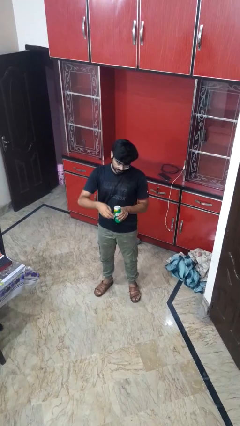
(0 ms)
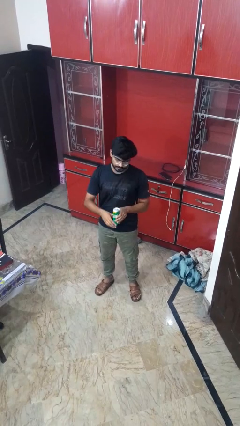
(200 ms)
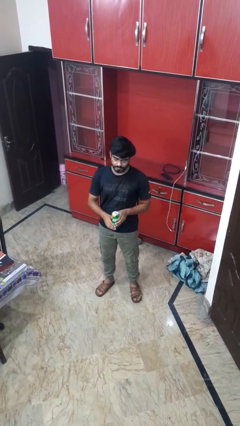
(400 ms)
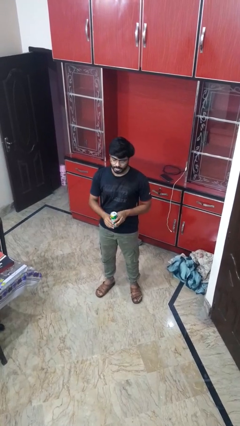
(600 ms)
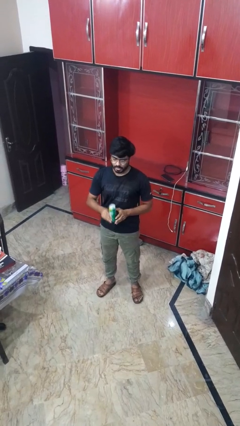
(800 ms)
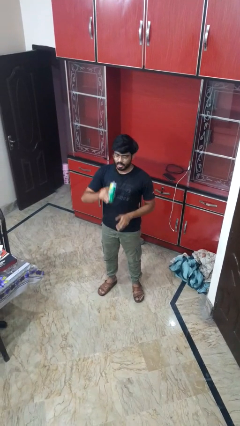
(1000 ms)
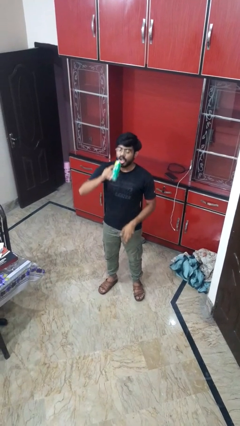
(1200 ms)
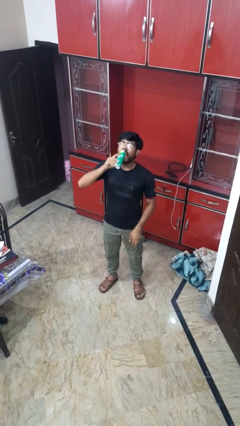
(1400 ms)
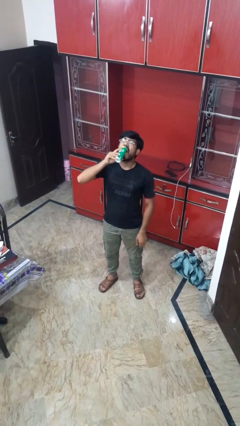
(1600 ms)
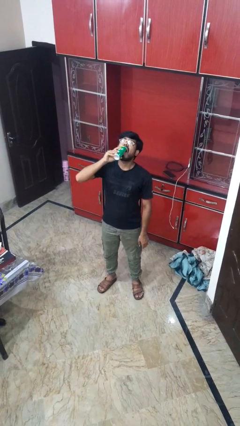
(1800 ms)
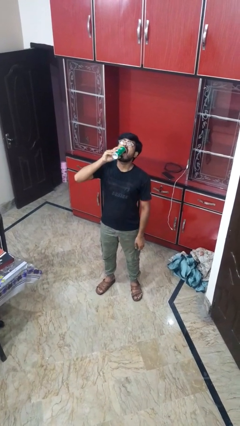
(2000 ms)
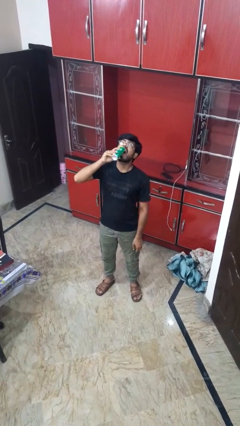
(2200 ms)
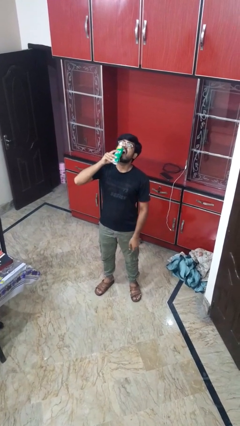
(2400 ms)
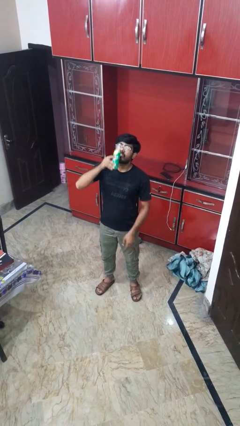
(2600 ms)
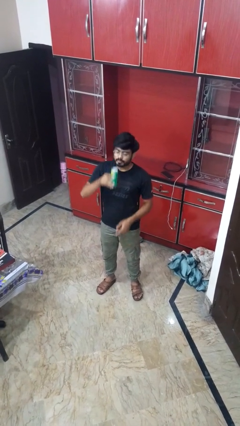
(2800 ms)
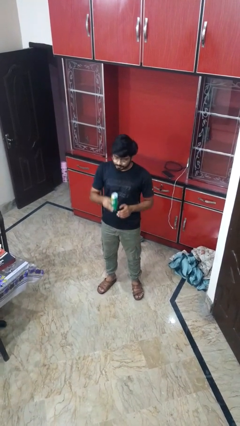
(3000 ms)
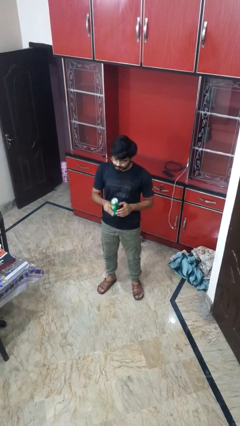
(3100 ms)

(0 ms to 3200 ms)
person drinks from beverage can

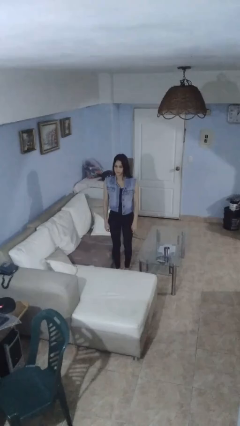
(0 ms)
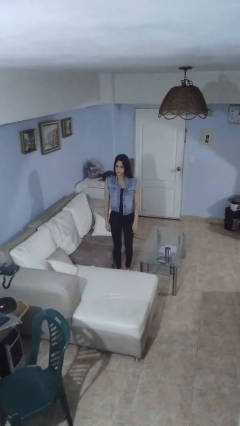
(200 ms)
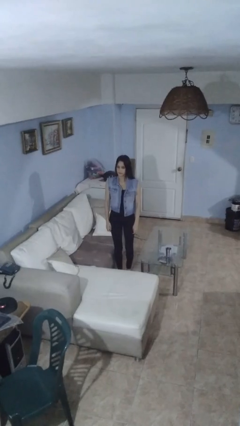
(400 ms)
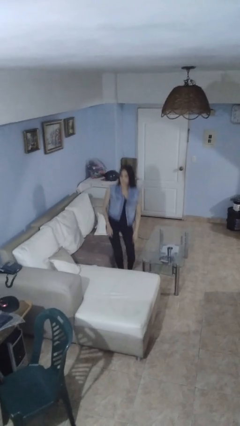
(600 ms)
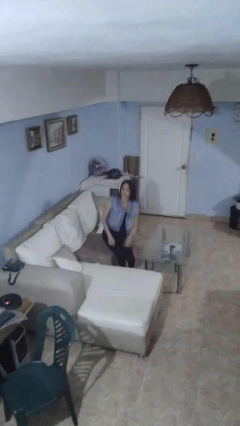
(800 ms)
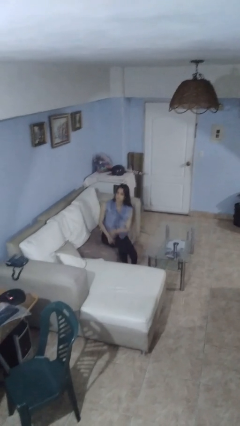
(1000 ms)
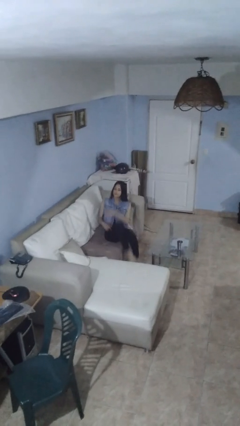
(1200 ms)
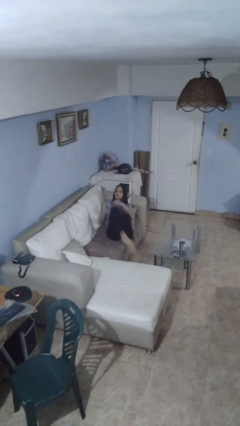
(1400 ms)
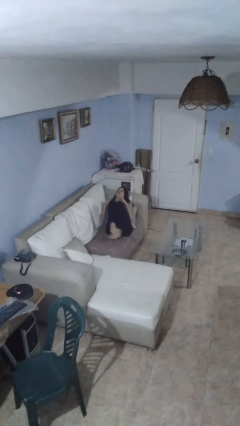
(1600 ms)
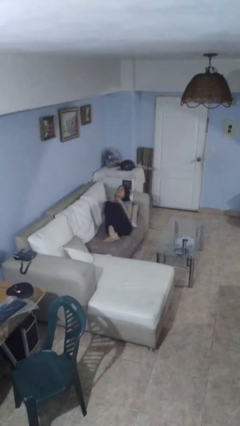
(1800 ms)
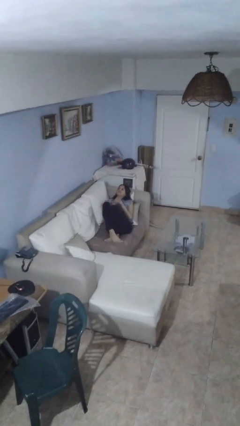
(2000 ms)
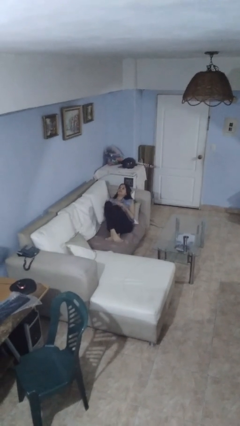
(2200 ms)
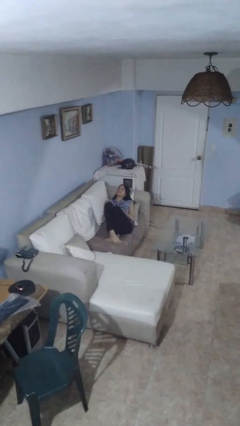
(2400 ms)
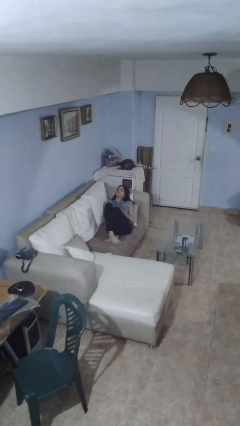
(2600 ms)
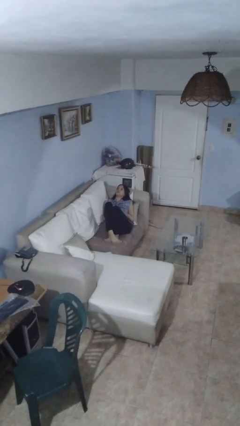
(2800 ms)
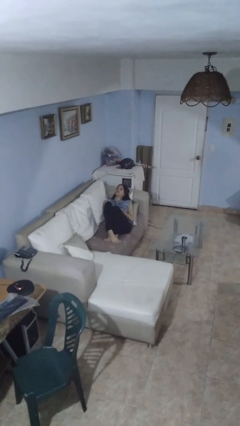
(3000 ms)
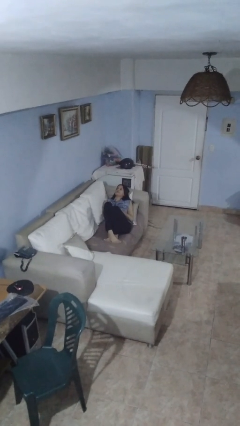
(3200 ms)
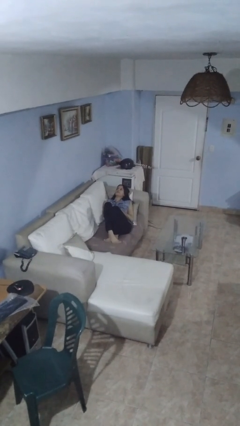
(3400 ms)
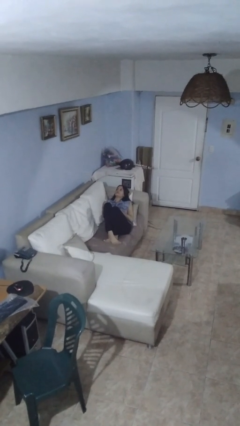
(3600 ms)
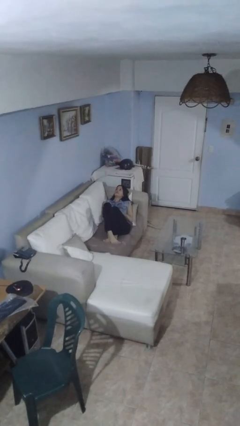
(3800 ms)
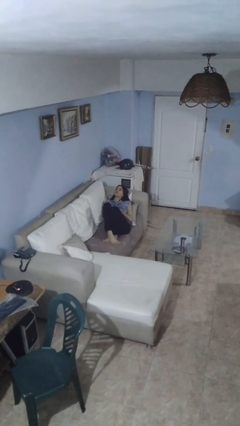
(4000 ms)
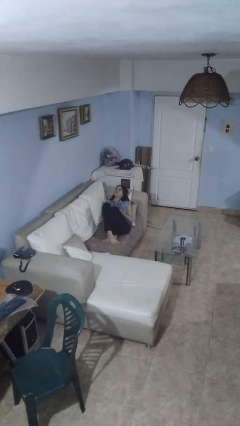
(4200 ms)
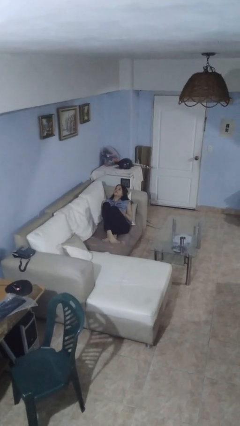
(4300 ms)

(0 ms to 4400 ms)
person lies down on couch

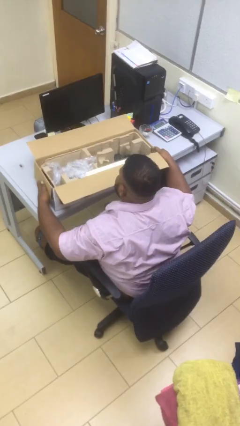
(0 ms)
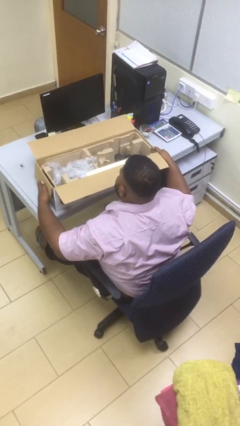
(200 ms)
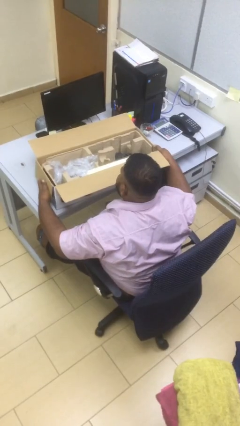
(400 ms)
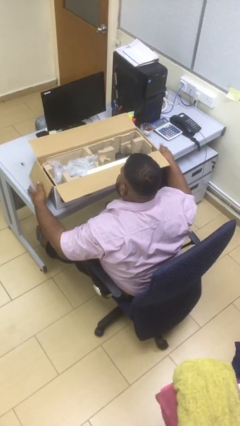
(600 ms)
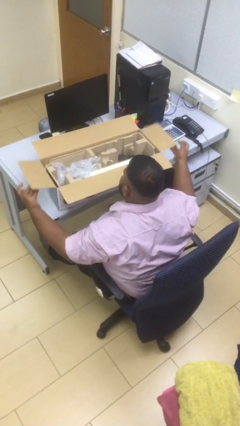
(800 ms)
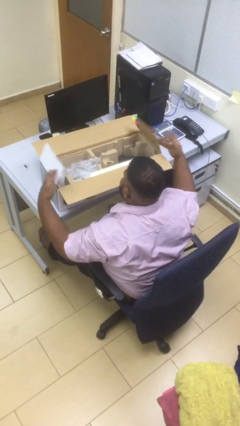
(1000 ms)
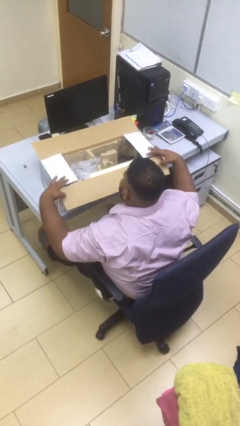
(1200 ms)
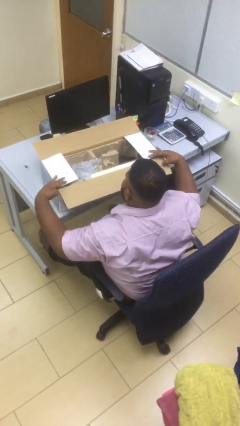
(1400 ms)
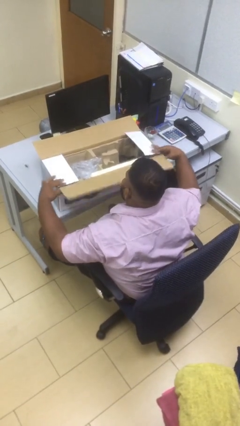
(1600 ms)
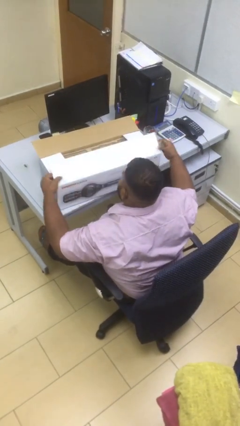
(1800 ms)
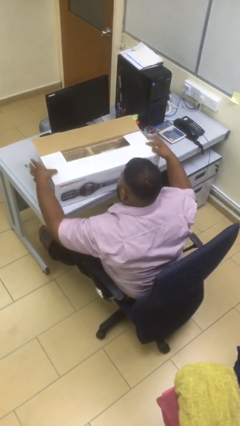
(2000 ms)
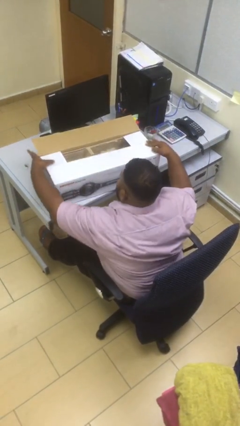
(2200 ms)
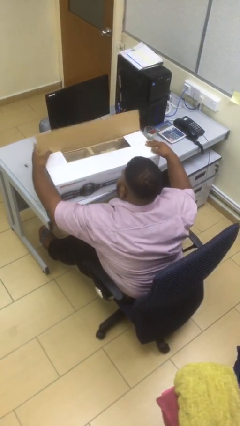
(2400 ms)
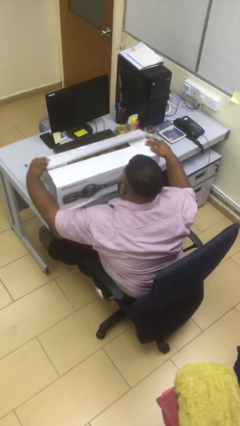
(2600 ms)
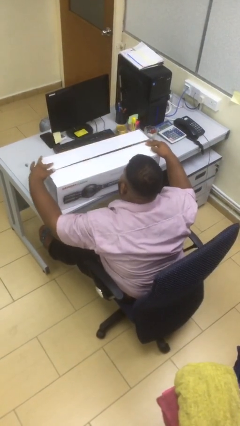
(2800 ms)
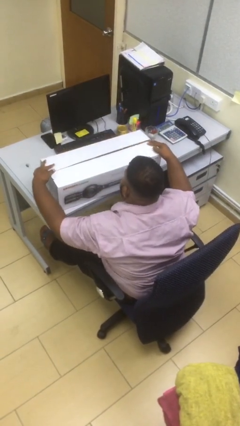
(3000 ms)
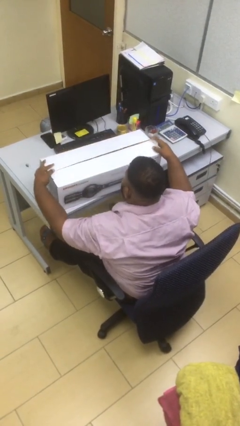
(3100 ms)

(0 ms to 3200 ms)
person closes box

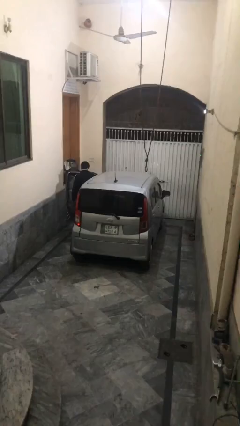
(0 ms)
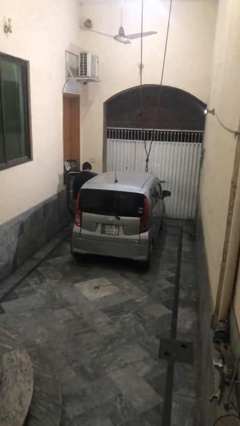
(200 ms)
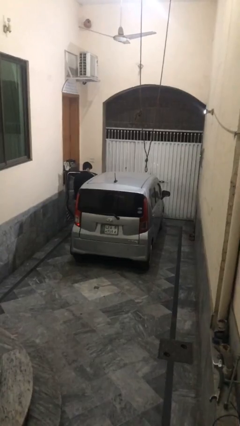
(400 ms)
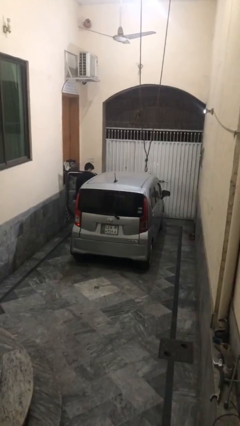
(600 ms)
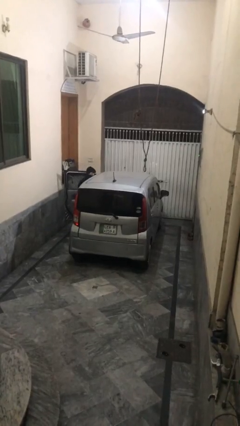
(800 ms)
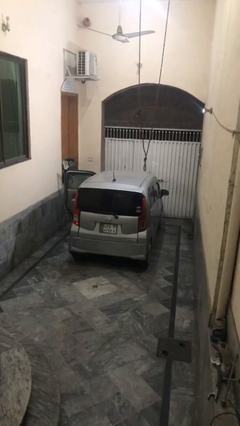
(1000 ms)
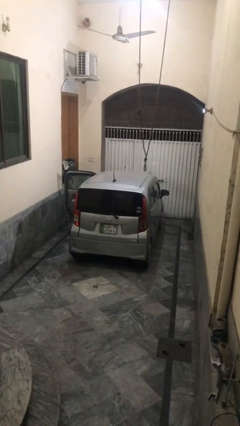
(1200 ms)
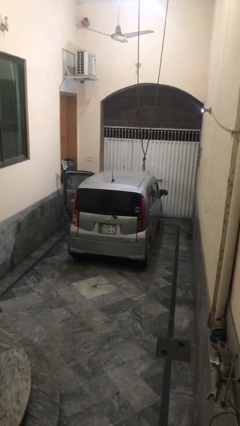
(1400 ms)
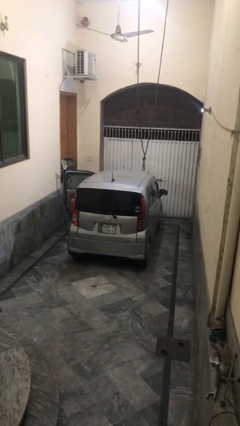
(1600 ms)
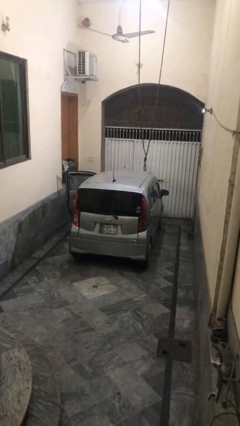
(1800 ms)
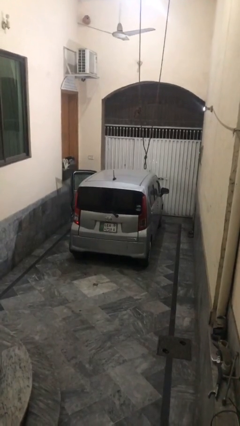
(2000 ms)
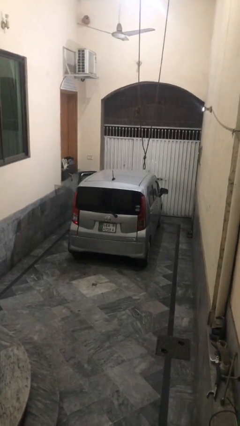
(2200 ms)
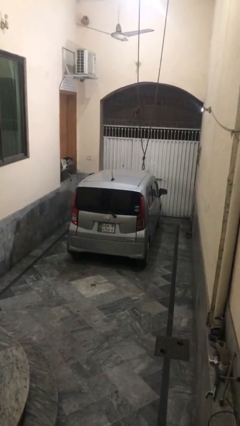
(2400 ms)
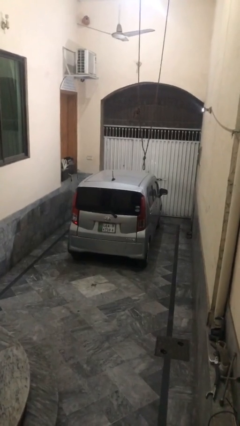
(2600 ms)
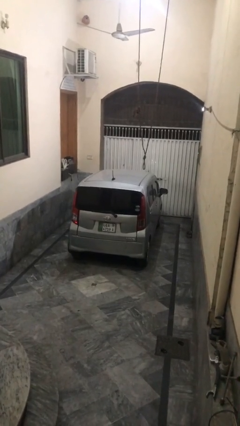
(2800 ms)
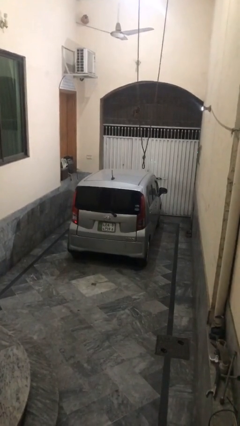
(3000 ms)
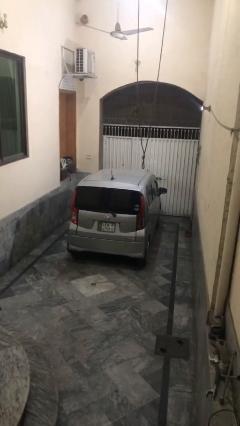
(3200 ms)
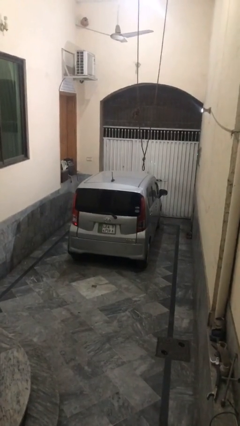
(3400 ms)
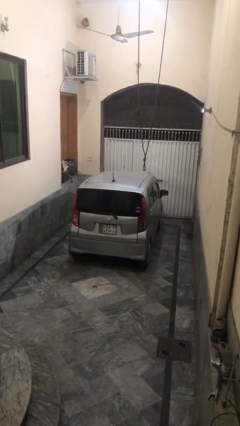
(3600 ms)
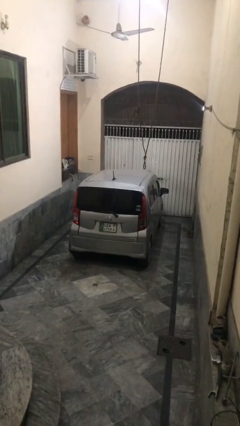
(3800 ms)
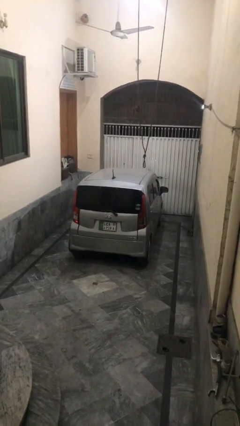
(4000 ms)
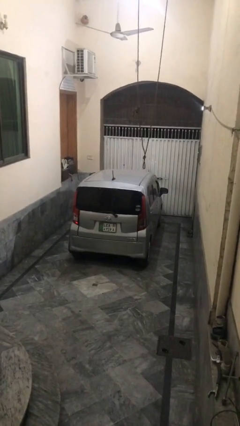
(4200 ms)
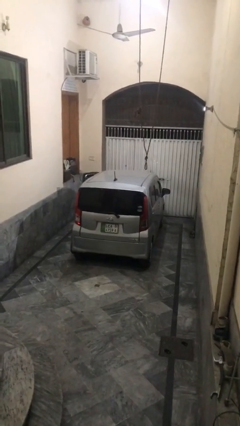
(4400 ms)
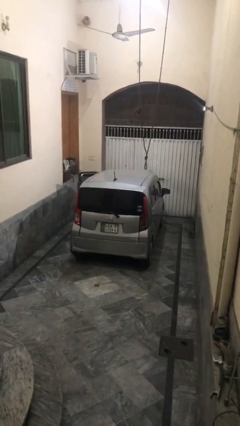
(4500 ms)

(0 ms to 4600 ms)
car picks up person

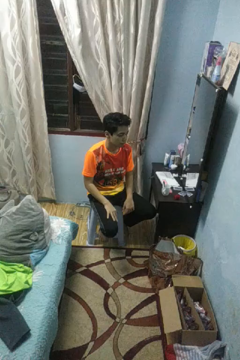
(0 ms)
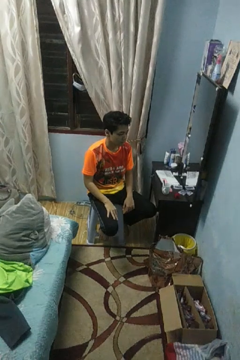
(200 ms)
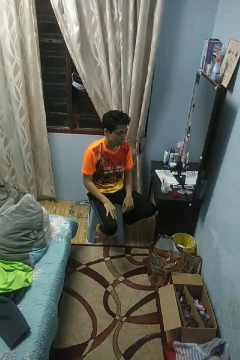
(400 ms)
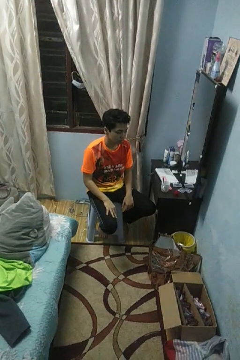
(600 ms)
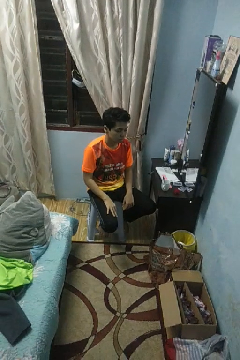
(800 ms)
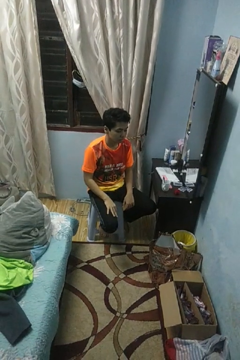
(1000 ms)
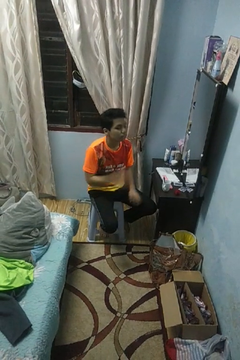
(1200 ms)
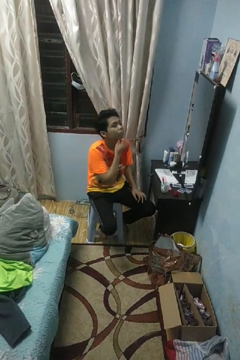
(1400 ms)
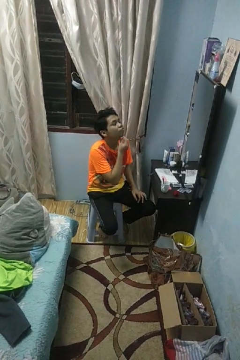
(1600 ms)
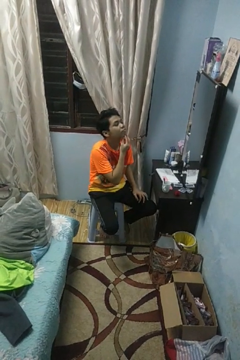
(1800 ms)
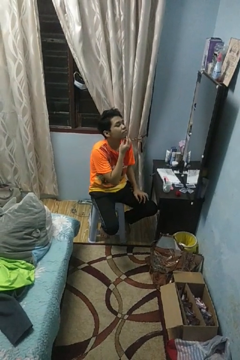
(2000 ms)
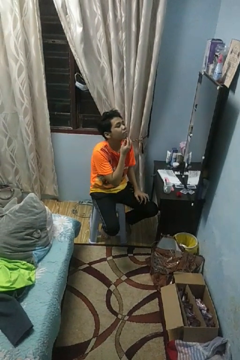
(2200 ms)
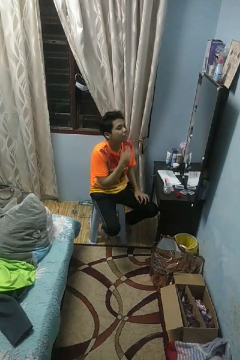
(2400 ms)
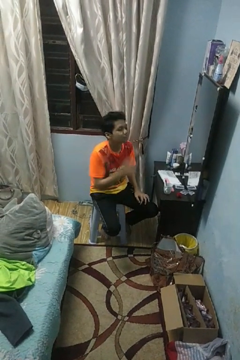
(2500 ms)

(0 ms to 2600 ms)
person strokes chin
